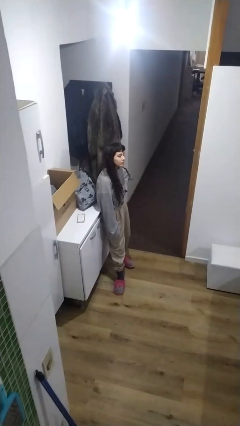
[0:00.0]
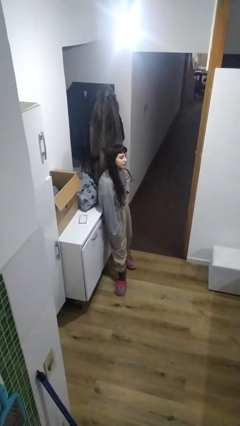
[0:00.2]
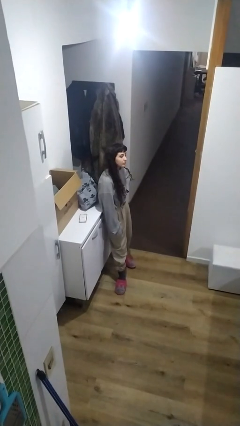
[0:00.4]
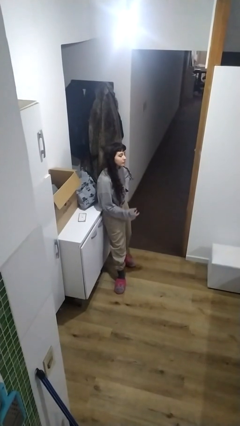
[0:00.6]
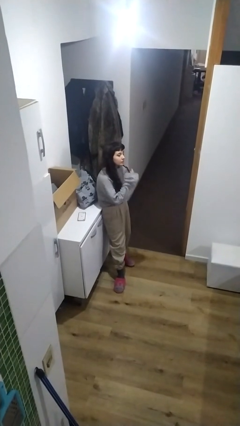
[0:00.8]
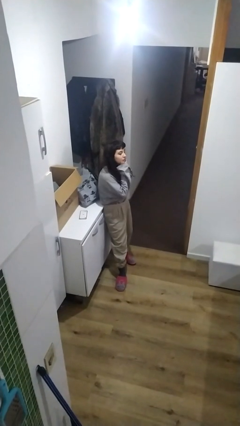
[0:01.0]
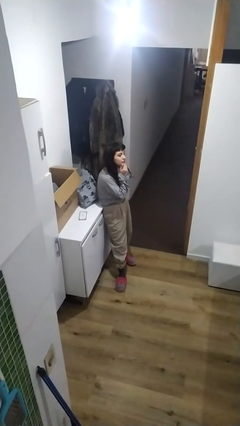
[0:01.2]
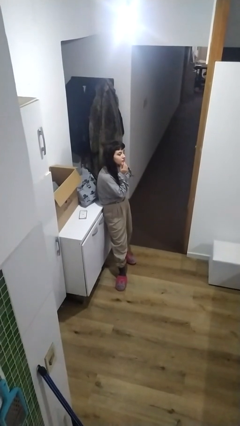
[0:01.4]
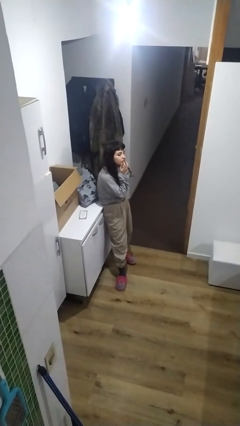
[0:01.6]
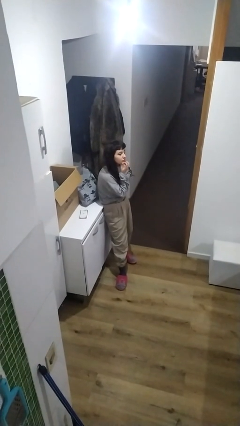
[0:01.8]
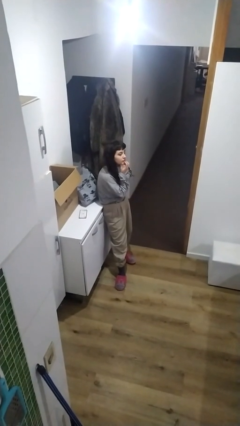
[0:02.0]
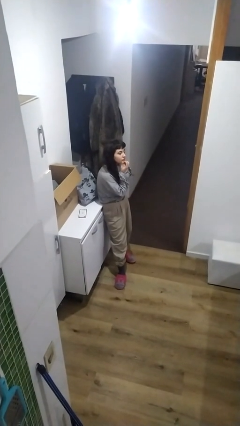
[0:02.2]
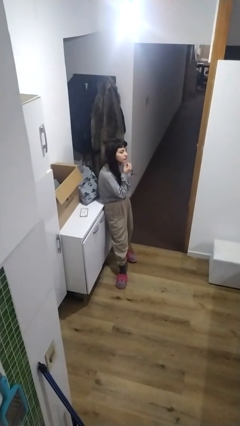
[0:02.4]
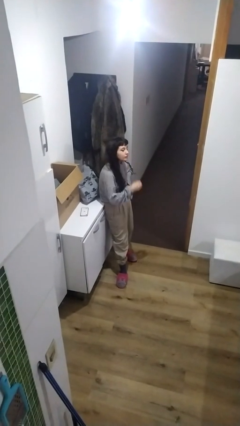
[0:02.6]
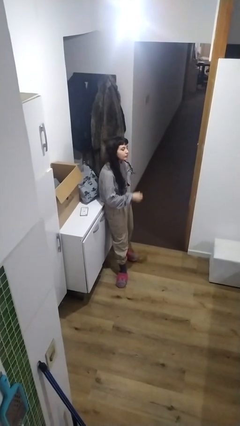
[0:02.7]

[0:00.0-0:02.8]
person strokes chin

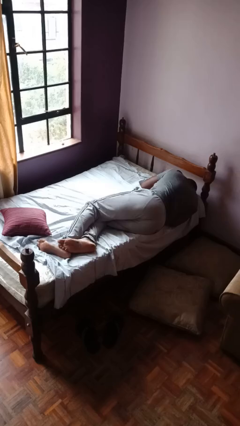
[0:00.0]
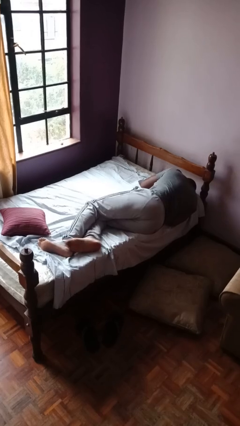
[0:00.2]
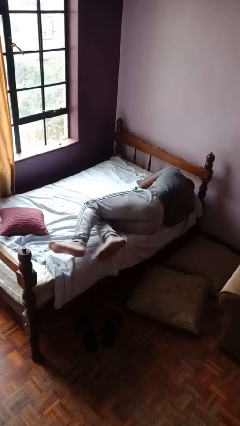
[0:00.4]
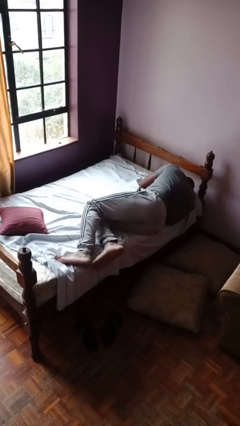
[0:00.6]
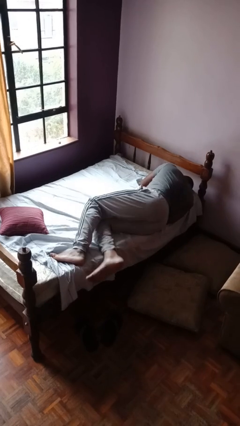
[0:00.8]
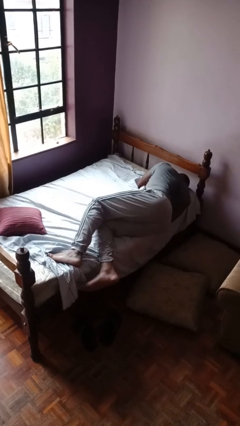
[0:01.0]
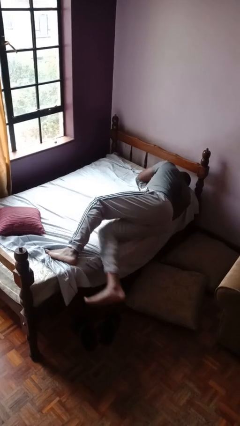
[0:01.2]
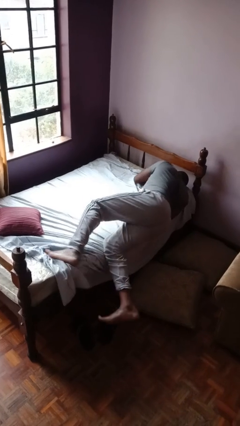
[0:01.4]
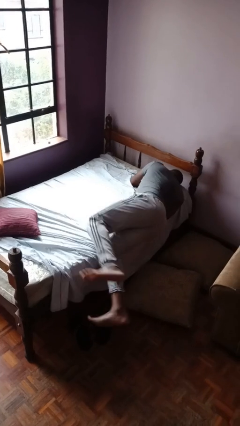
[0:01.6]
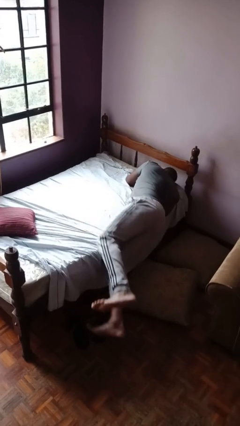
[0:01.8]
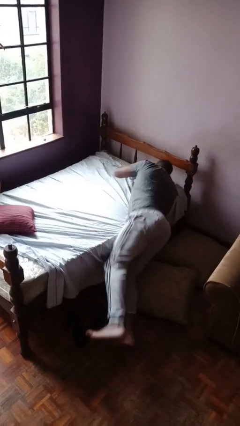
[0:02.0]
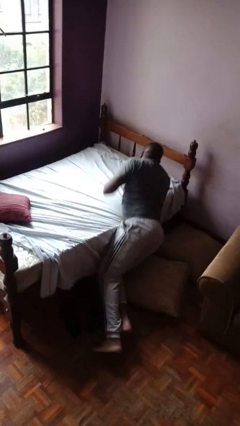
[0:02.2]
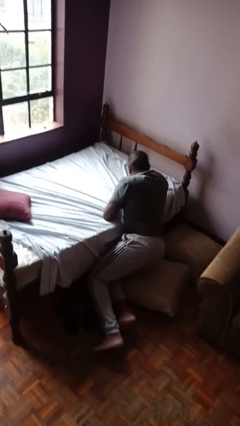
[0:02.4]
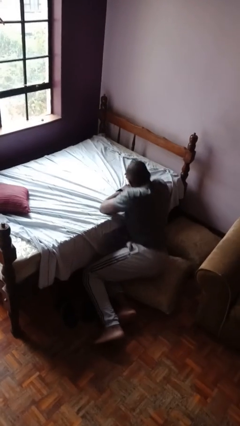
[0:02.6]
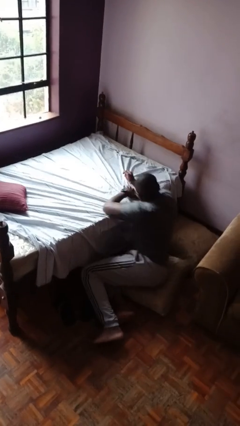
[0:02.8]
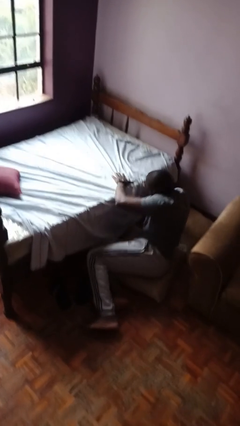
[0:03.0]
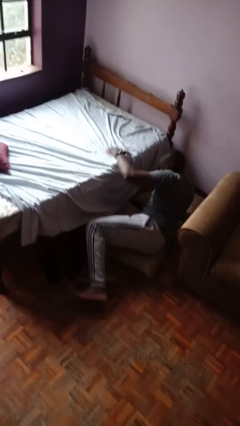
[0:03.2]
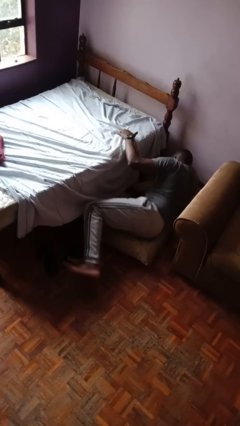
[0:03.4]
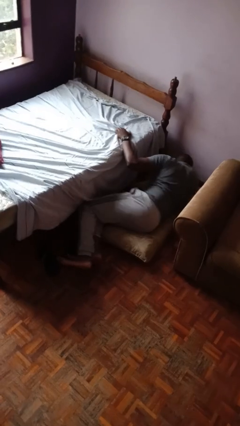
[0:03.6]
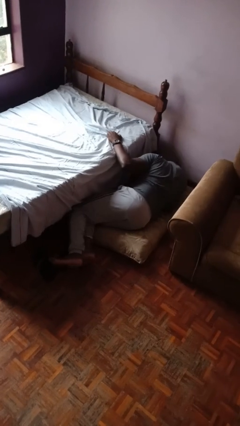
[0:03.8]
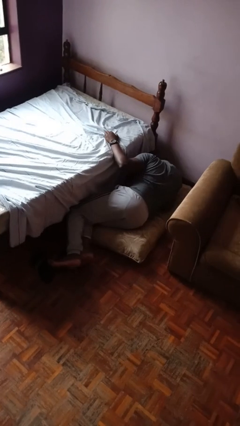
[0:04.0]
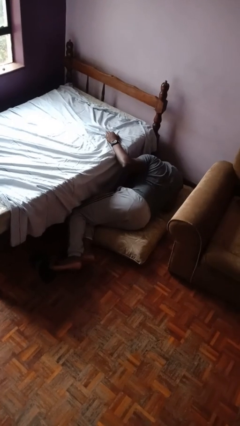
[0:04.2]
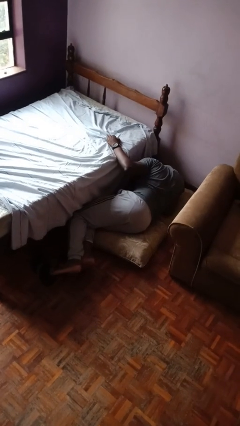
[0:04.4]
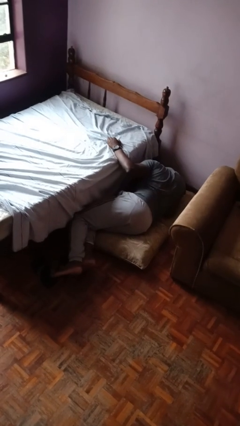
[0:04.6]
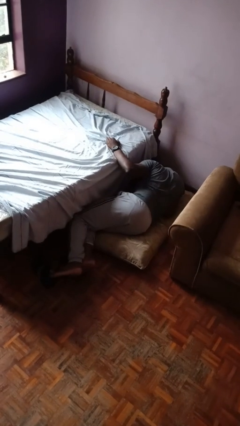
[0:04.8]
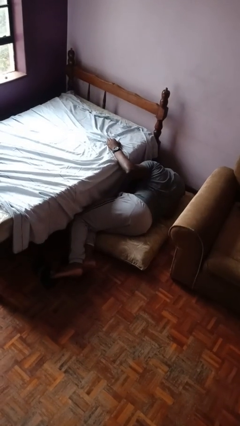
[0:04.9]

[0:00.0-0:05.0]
person falls from bed

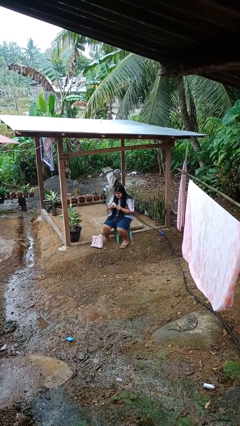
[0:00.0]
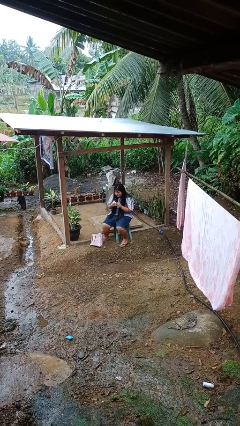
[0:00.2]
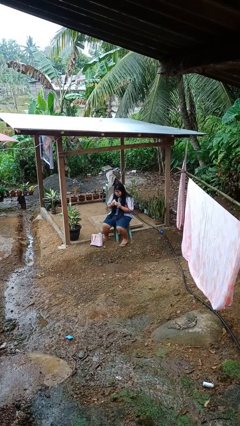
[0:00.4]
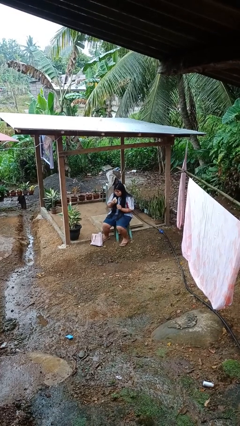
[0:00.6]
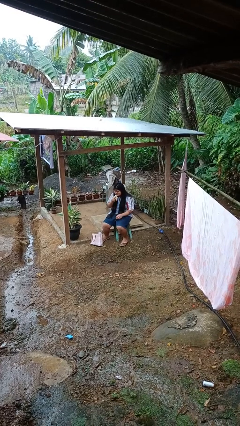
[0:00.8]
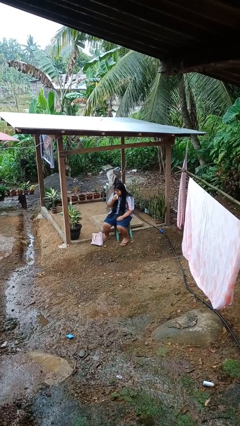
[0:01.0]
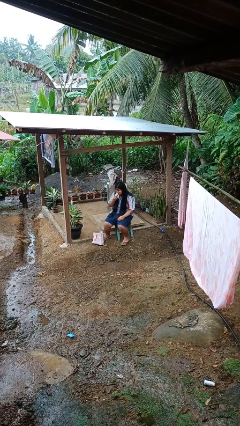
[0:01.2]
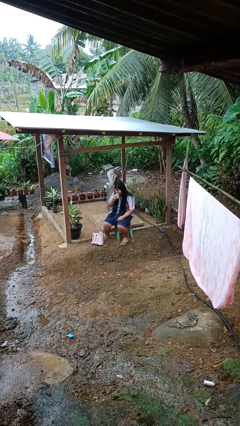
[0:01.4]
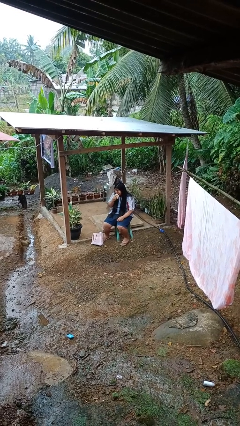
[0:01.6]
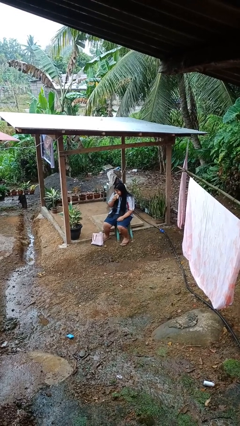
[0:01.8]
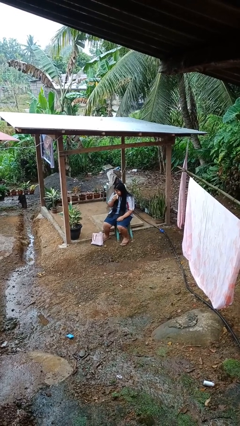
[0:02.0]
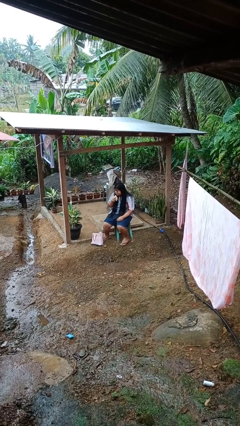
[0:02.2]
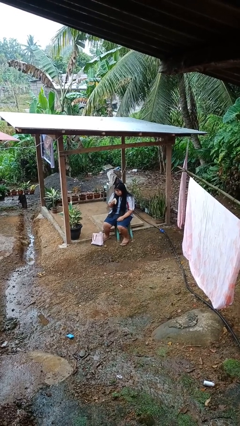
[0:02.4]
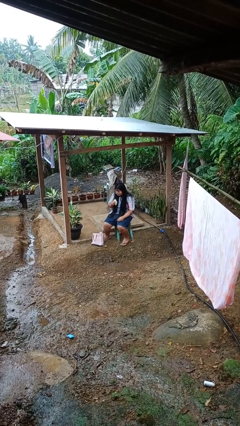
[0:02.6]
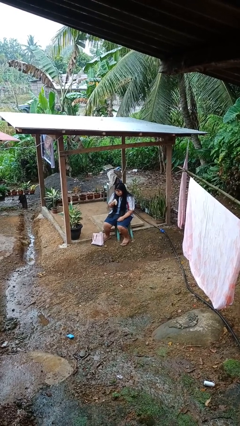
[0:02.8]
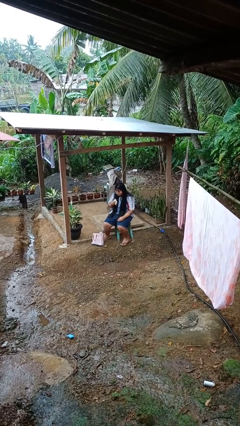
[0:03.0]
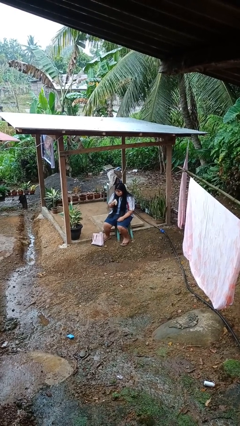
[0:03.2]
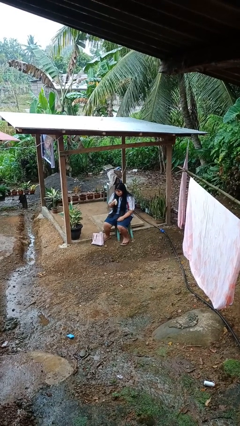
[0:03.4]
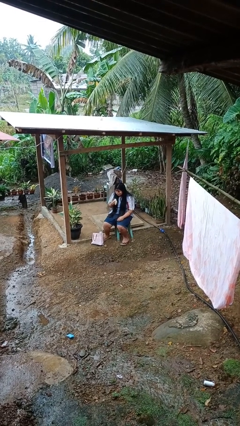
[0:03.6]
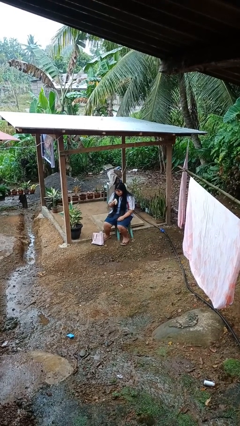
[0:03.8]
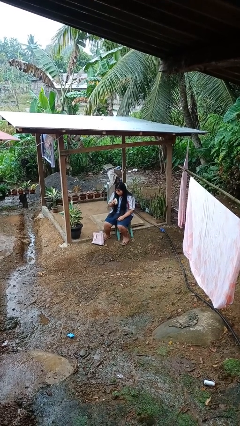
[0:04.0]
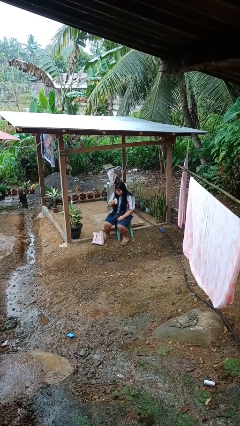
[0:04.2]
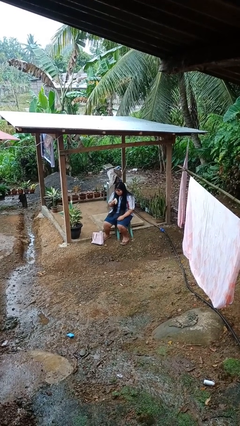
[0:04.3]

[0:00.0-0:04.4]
person eats banana

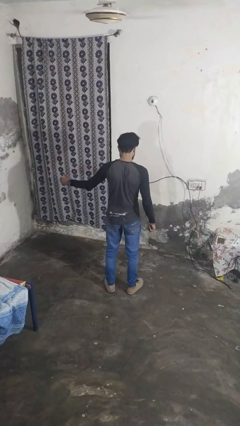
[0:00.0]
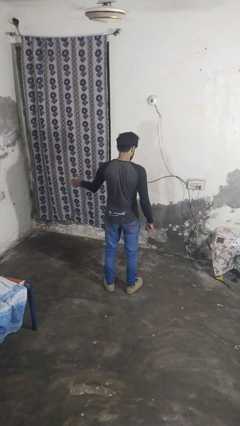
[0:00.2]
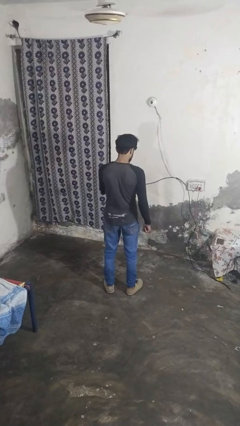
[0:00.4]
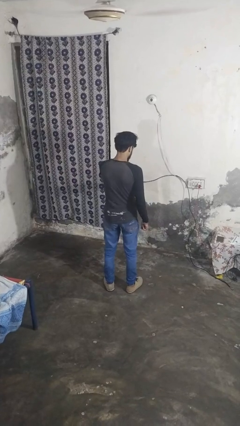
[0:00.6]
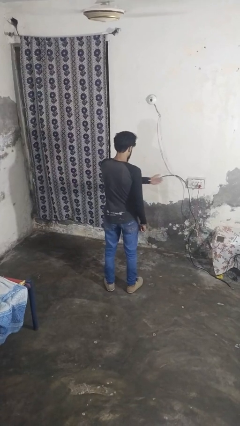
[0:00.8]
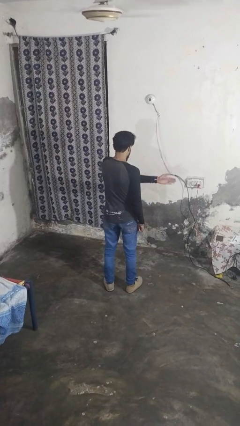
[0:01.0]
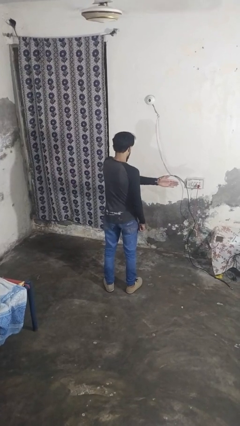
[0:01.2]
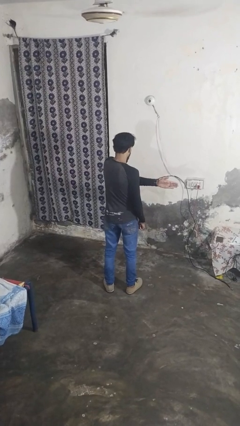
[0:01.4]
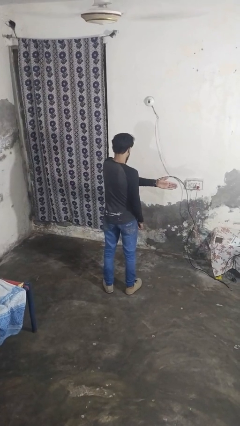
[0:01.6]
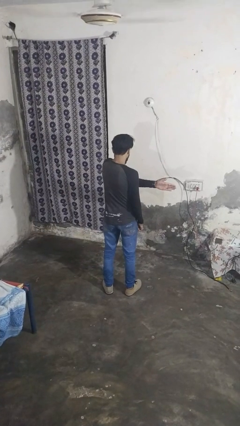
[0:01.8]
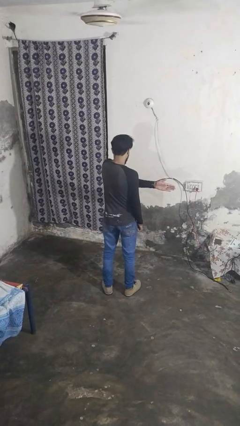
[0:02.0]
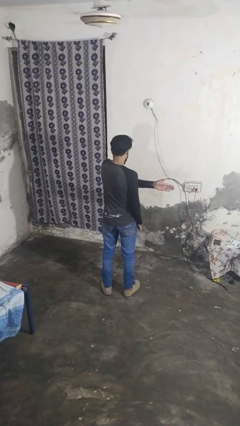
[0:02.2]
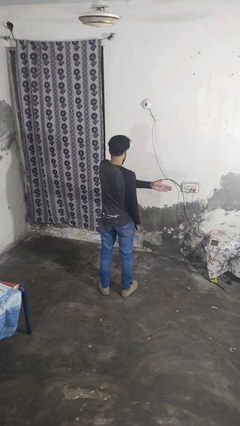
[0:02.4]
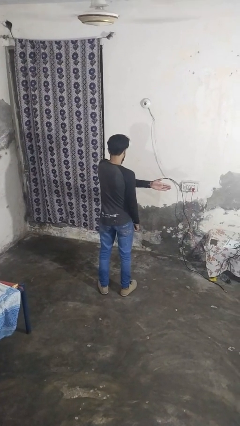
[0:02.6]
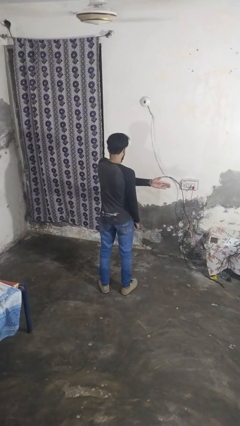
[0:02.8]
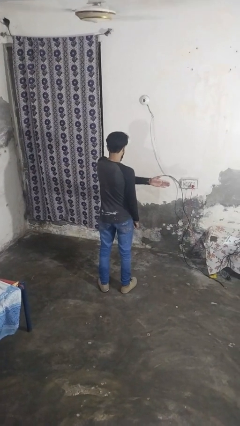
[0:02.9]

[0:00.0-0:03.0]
person gestures swipe right

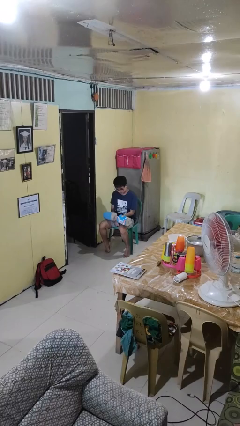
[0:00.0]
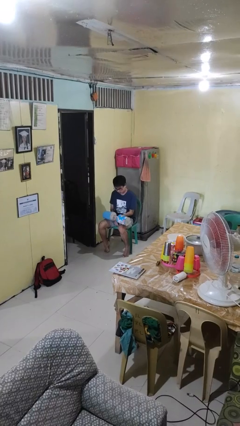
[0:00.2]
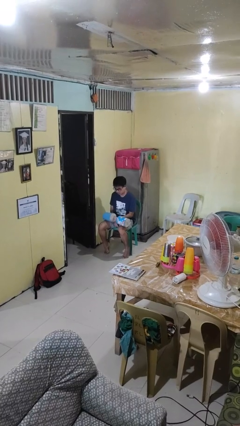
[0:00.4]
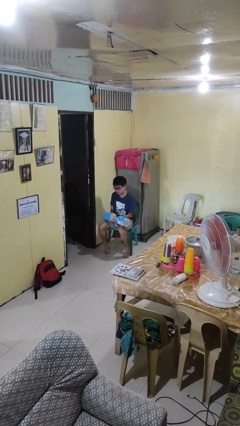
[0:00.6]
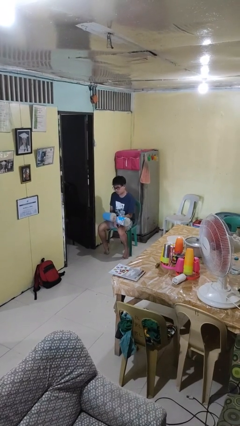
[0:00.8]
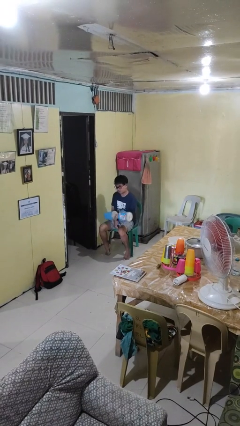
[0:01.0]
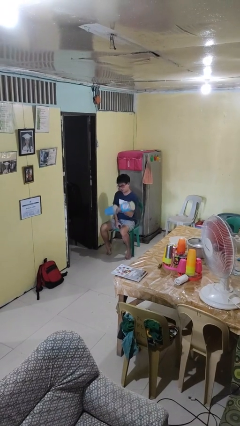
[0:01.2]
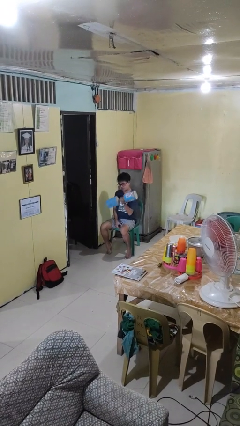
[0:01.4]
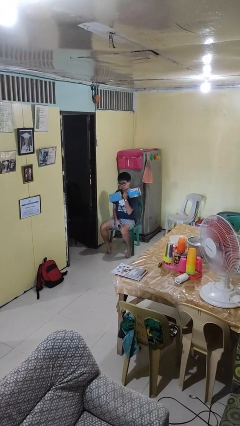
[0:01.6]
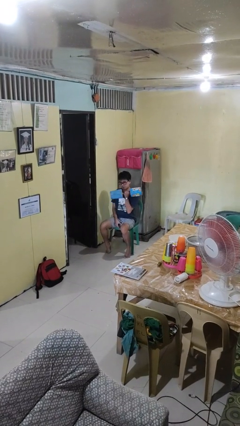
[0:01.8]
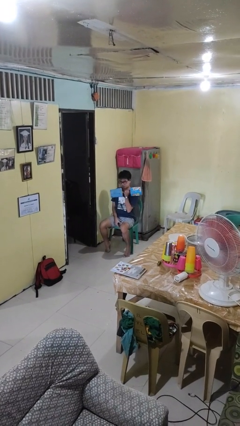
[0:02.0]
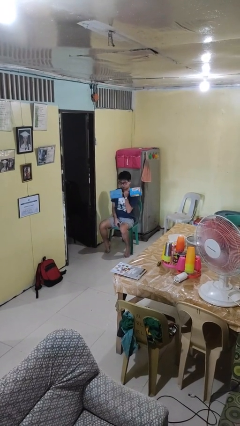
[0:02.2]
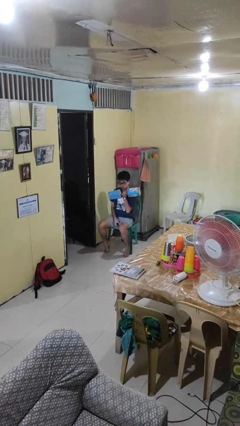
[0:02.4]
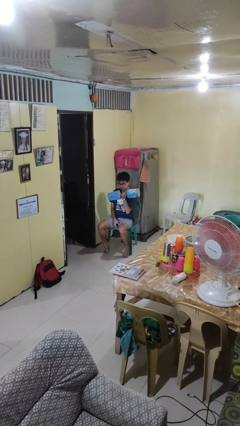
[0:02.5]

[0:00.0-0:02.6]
person lifts dumbbells
